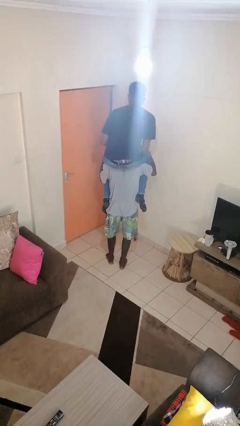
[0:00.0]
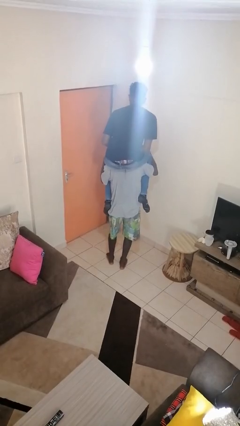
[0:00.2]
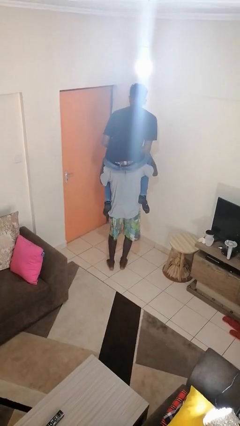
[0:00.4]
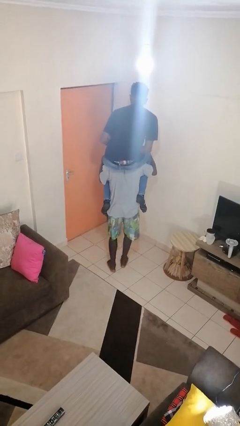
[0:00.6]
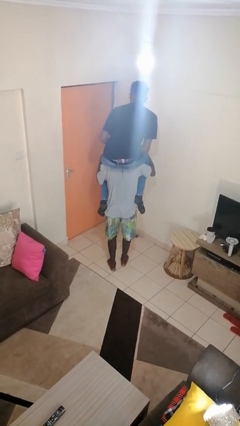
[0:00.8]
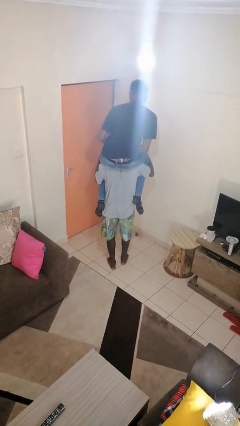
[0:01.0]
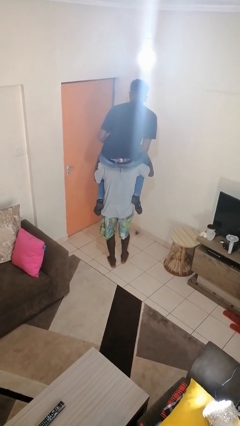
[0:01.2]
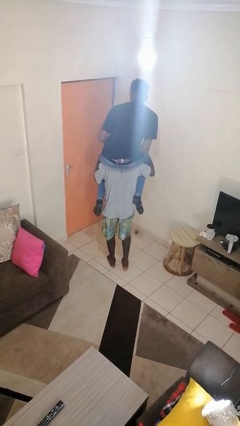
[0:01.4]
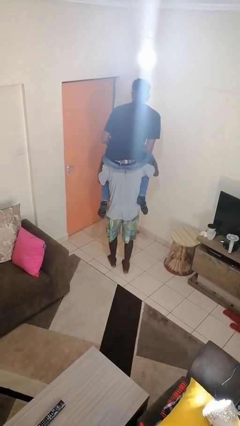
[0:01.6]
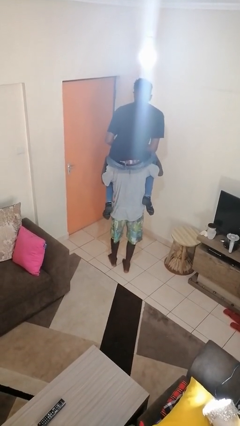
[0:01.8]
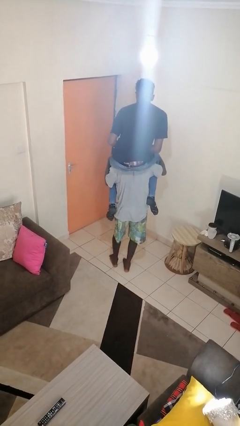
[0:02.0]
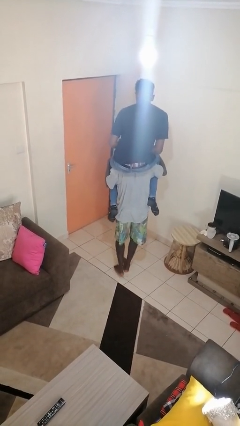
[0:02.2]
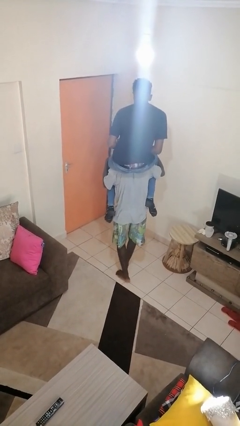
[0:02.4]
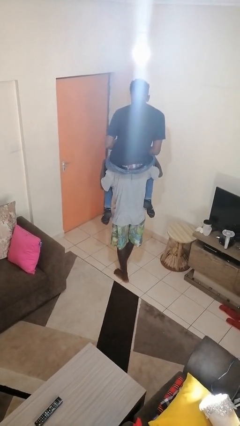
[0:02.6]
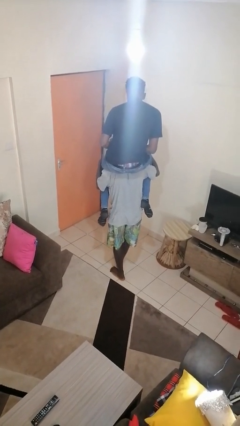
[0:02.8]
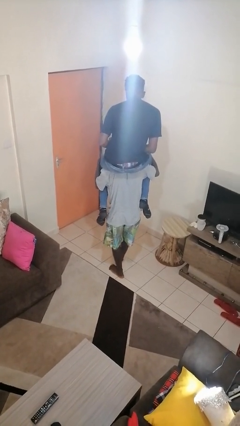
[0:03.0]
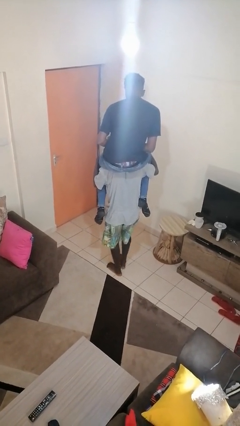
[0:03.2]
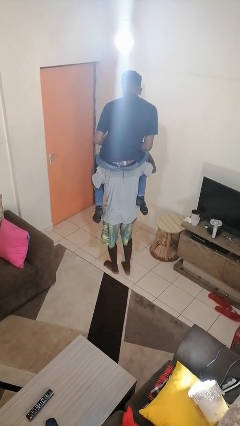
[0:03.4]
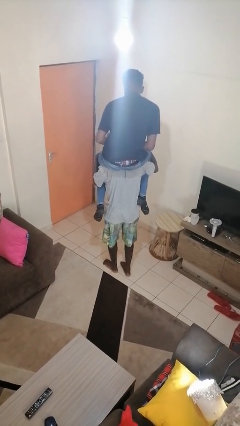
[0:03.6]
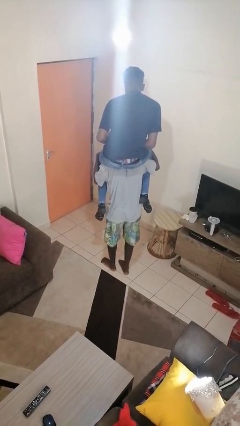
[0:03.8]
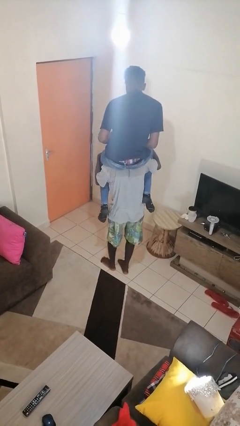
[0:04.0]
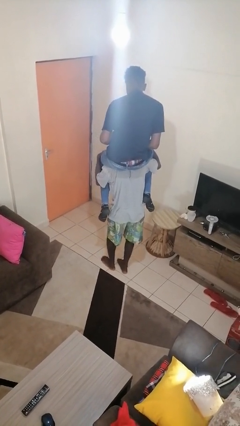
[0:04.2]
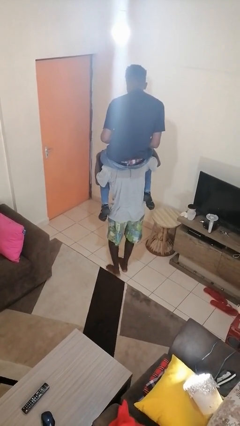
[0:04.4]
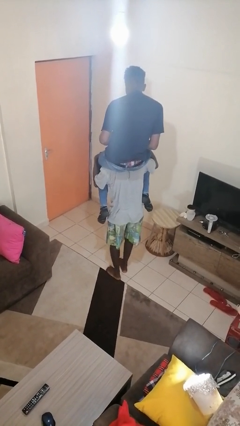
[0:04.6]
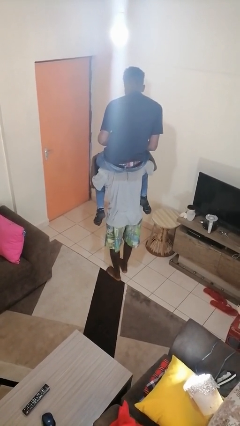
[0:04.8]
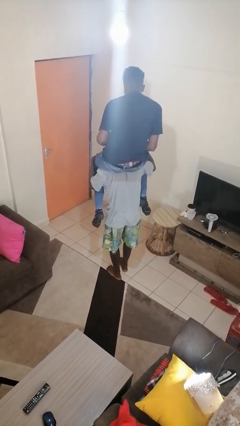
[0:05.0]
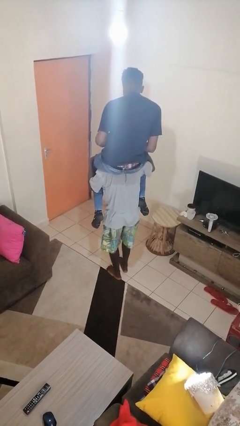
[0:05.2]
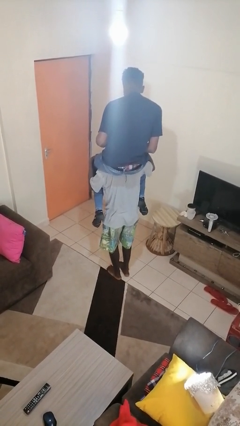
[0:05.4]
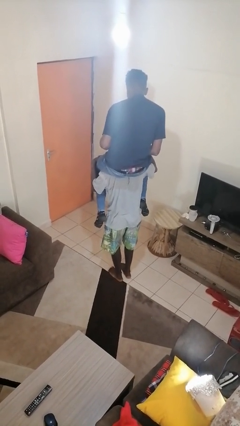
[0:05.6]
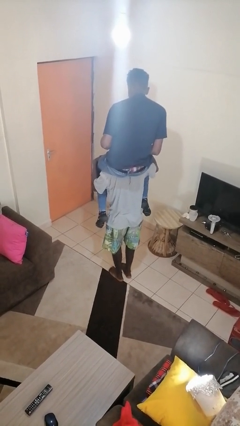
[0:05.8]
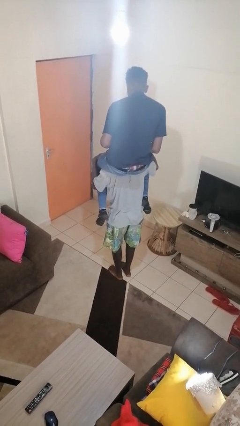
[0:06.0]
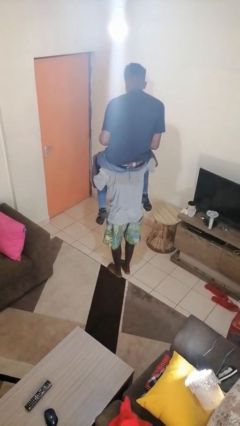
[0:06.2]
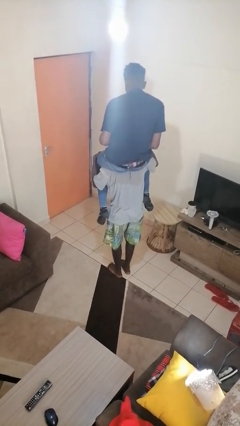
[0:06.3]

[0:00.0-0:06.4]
person carries person on shoulders

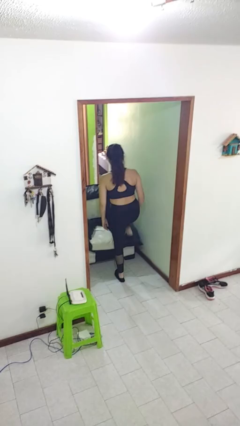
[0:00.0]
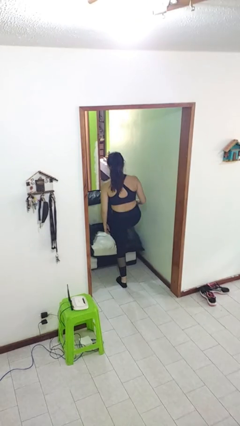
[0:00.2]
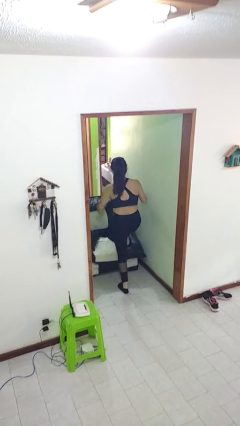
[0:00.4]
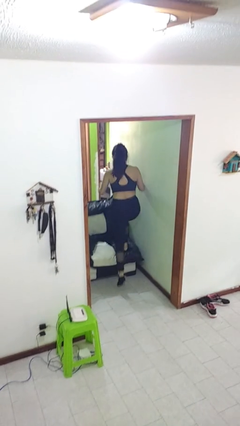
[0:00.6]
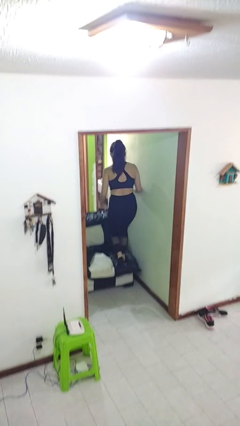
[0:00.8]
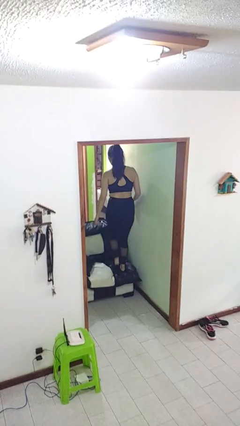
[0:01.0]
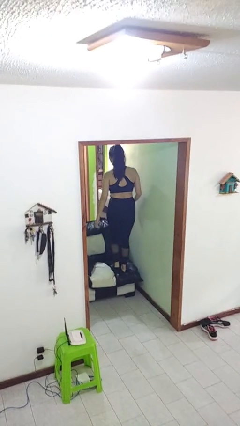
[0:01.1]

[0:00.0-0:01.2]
person climbs on couch

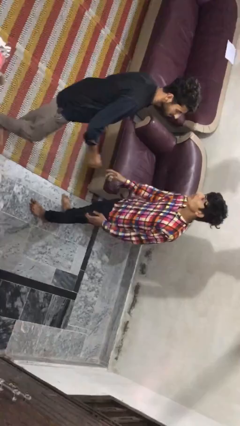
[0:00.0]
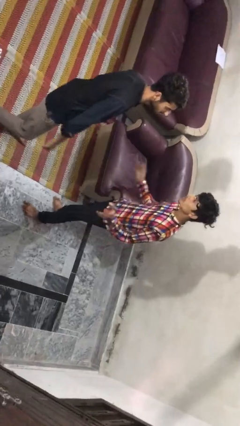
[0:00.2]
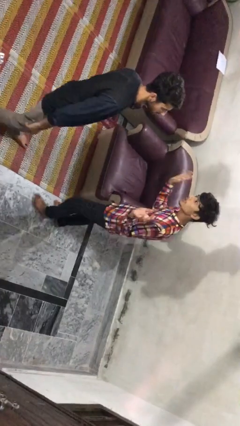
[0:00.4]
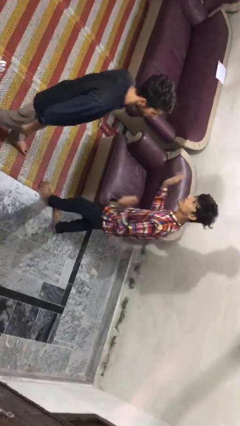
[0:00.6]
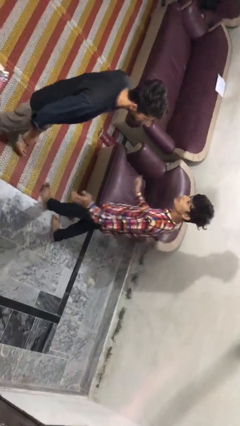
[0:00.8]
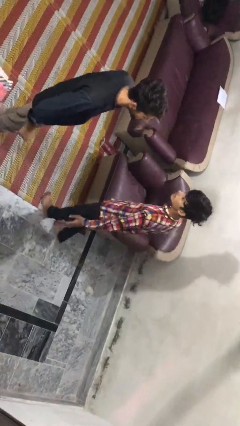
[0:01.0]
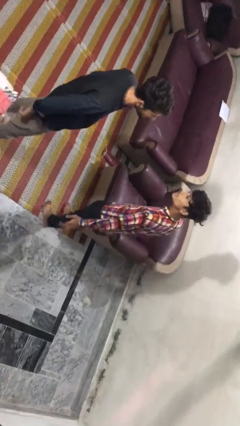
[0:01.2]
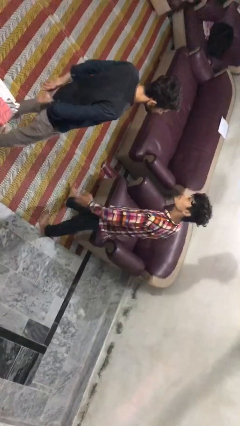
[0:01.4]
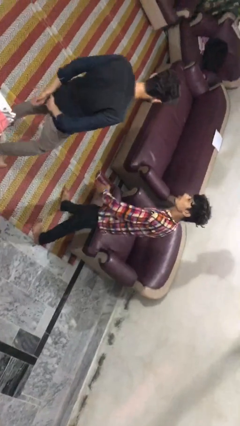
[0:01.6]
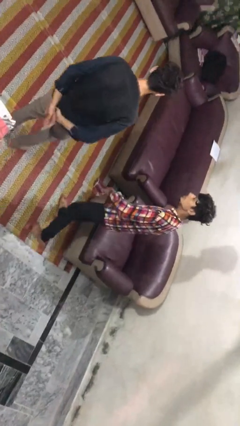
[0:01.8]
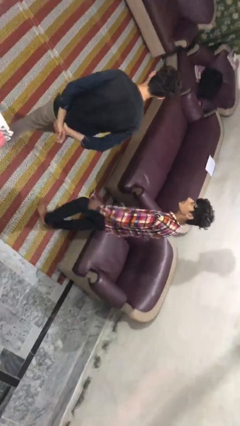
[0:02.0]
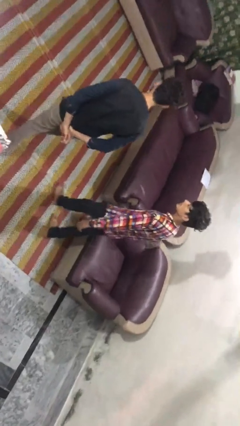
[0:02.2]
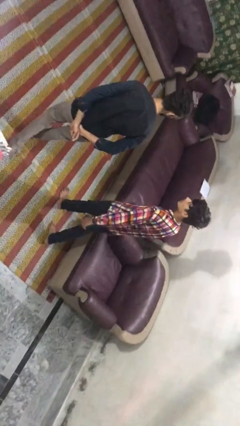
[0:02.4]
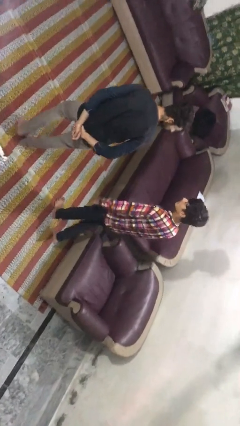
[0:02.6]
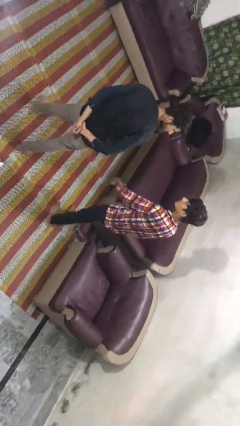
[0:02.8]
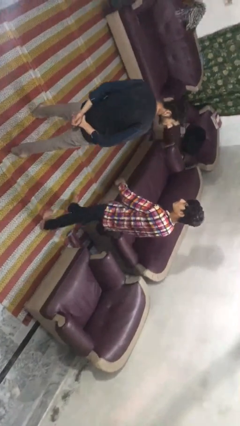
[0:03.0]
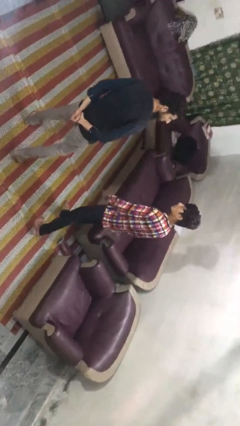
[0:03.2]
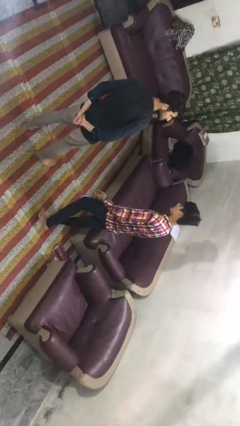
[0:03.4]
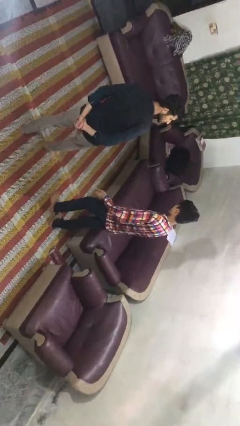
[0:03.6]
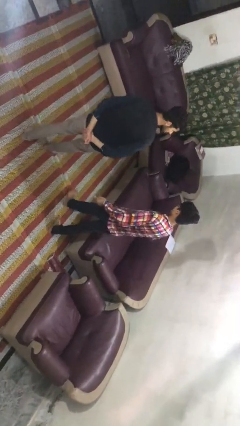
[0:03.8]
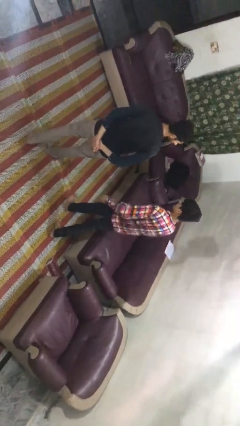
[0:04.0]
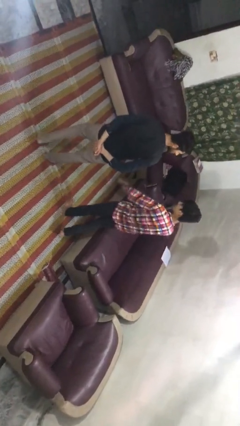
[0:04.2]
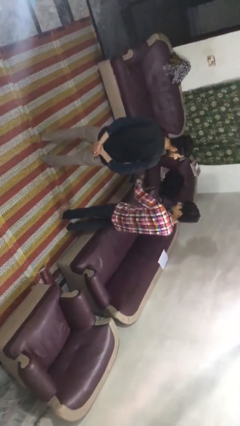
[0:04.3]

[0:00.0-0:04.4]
person talks to person

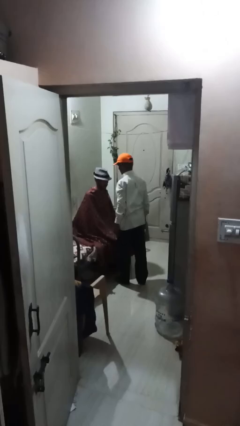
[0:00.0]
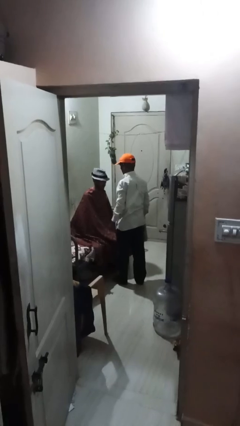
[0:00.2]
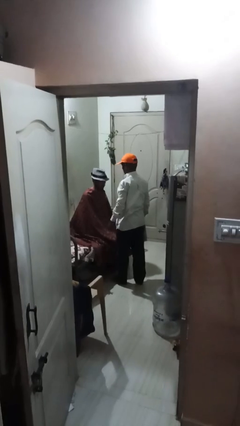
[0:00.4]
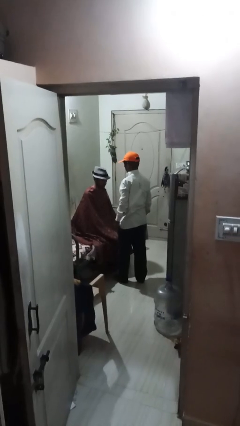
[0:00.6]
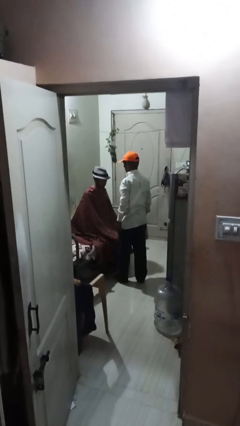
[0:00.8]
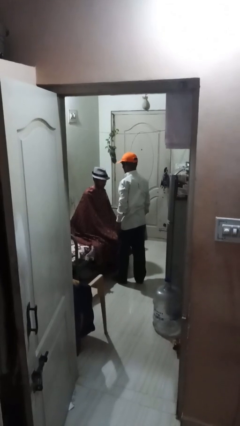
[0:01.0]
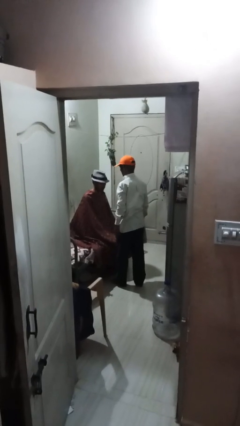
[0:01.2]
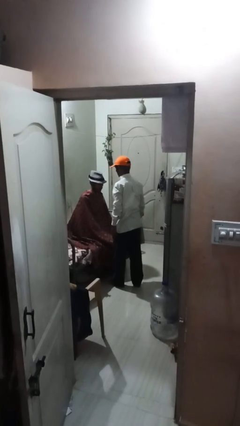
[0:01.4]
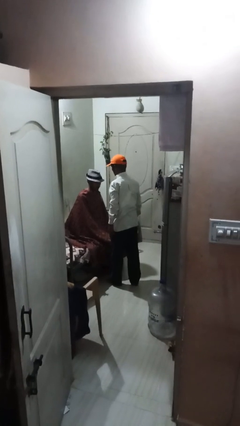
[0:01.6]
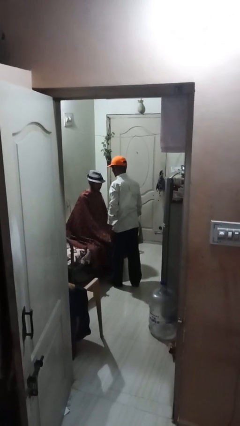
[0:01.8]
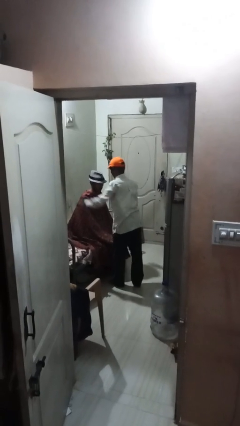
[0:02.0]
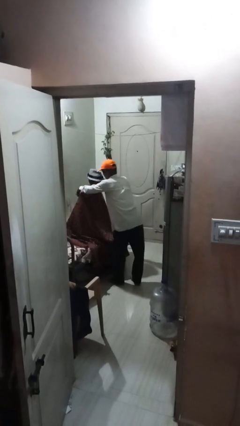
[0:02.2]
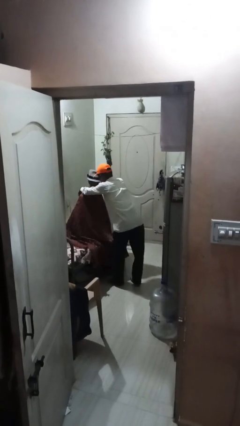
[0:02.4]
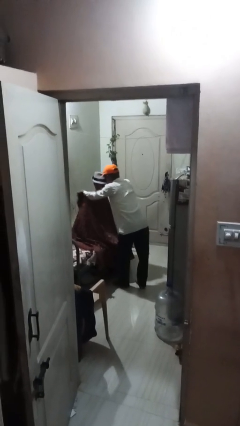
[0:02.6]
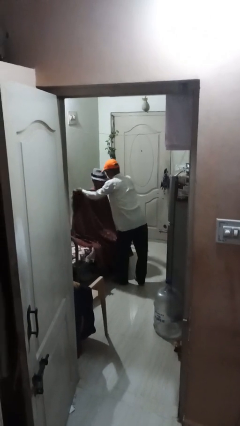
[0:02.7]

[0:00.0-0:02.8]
person covers friend with blanket

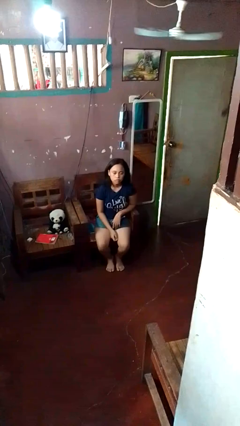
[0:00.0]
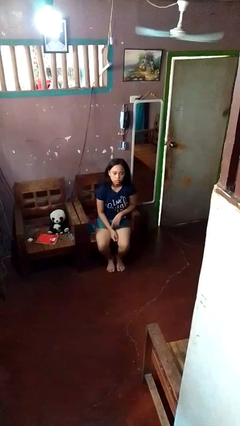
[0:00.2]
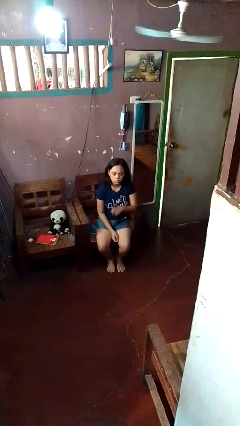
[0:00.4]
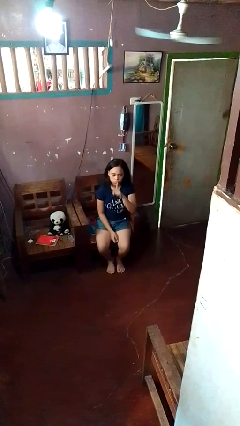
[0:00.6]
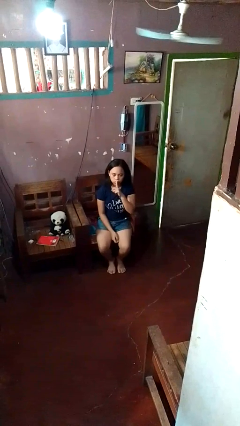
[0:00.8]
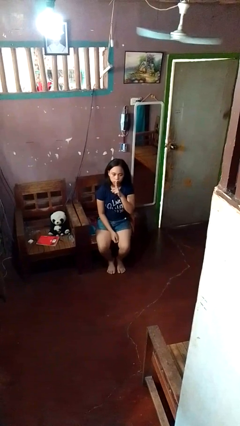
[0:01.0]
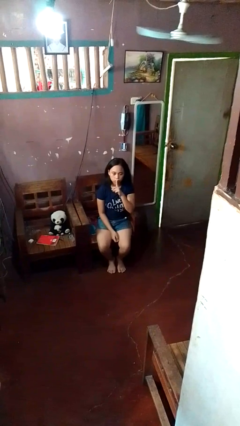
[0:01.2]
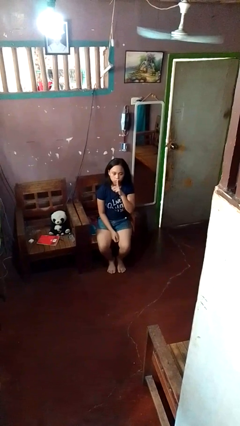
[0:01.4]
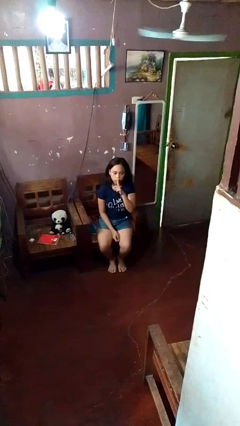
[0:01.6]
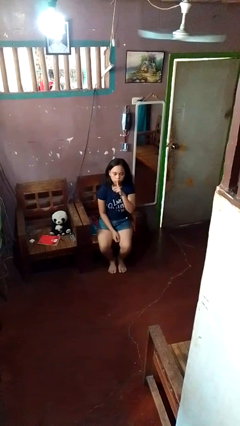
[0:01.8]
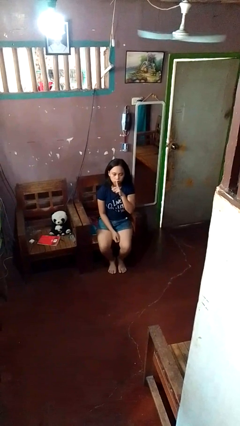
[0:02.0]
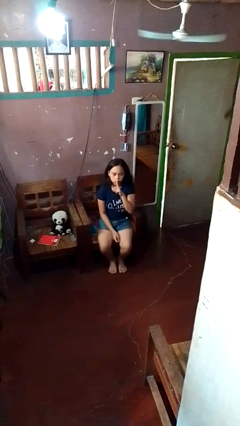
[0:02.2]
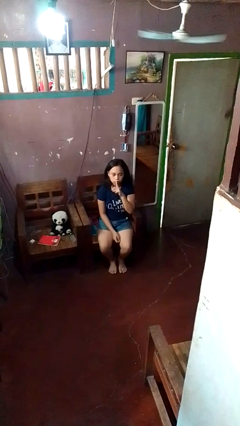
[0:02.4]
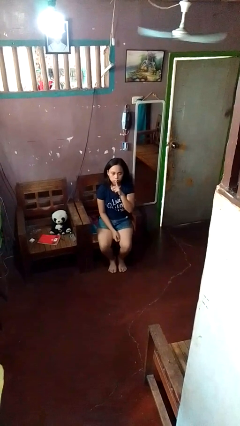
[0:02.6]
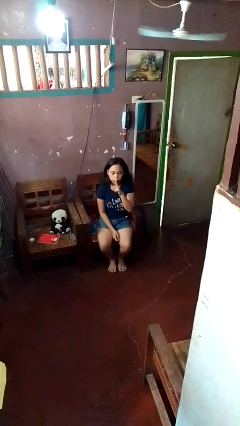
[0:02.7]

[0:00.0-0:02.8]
person gestures be quiet
